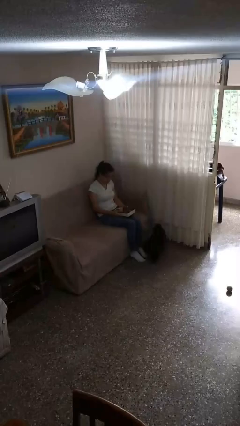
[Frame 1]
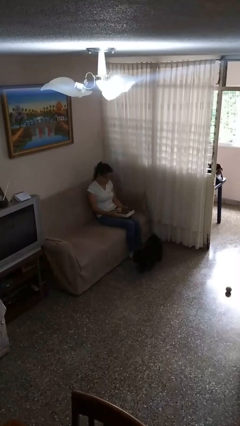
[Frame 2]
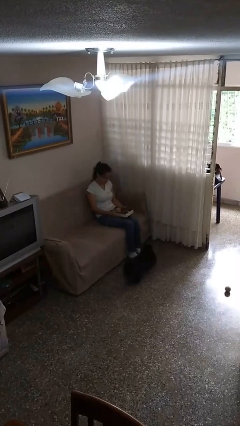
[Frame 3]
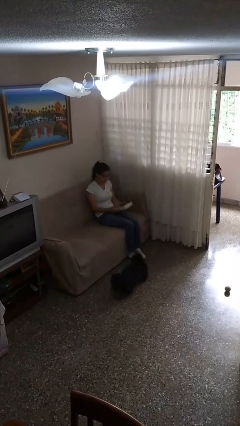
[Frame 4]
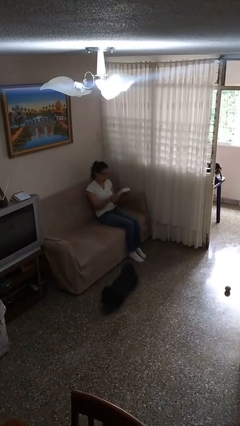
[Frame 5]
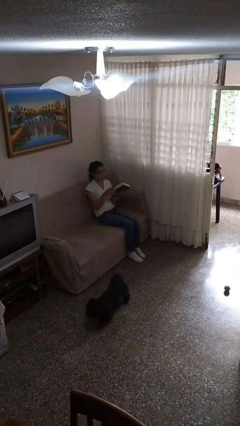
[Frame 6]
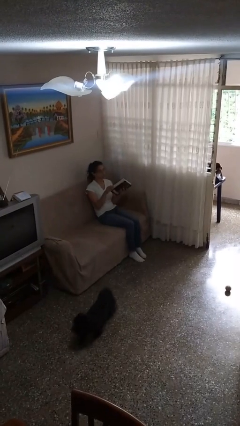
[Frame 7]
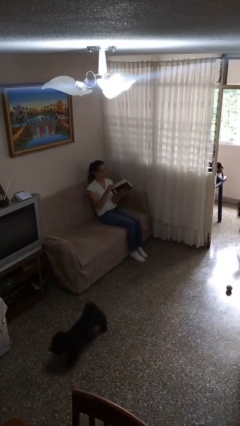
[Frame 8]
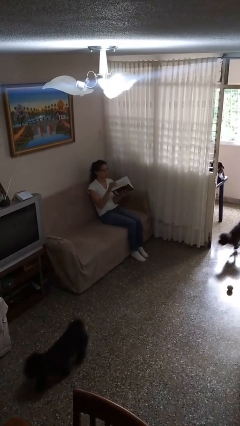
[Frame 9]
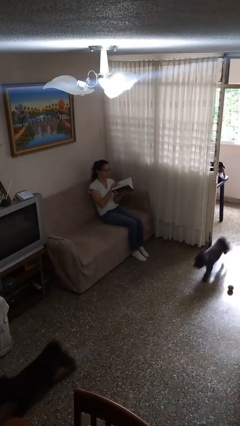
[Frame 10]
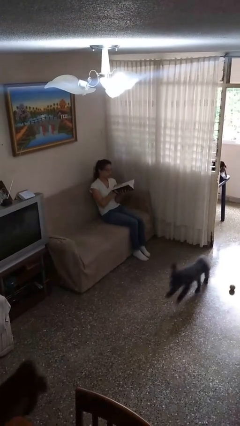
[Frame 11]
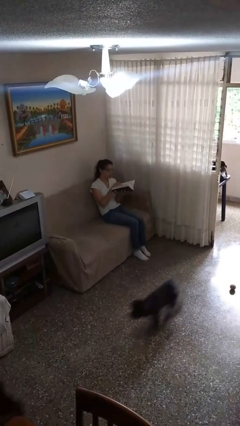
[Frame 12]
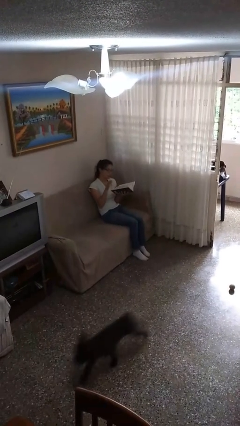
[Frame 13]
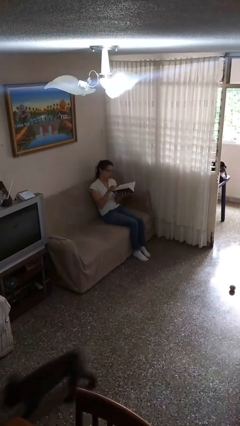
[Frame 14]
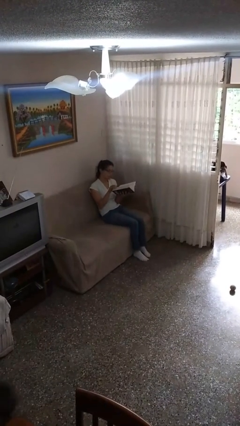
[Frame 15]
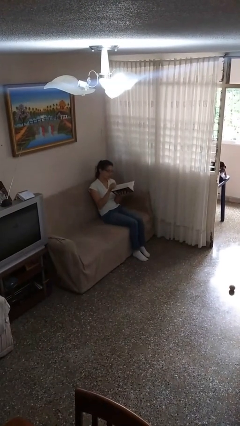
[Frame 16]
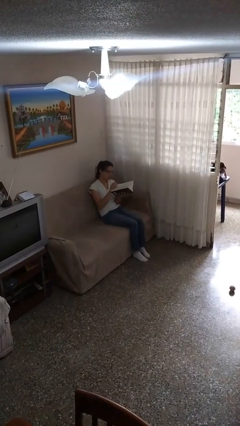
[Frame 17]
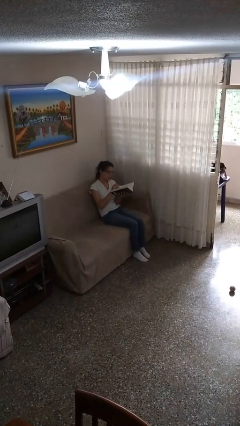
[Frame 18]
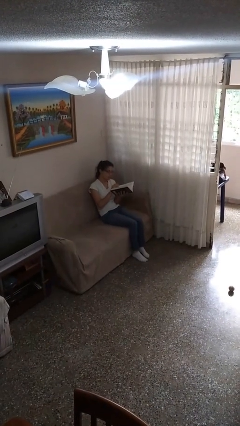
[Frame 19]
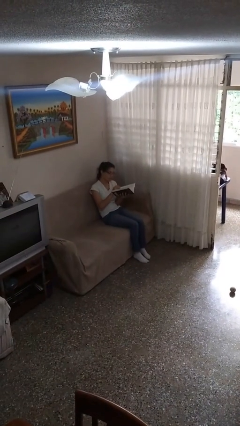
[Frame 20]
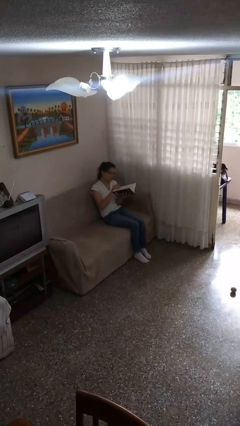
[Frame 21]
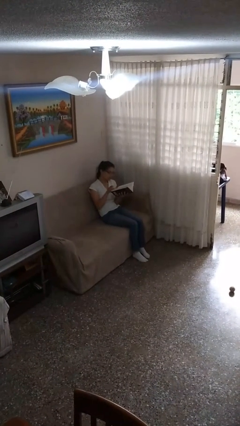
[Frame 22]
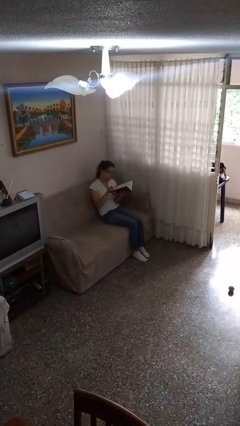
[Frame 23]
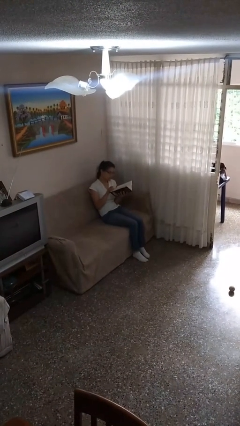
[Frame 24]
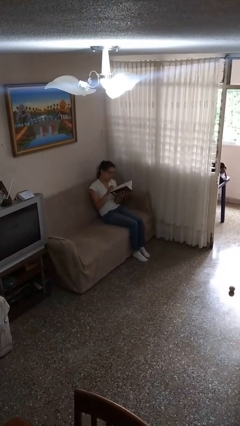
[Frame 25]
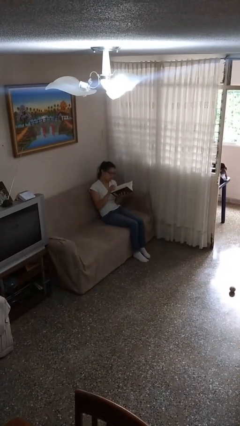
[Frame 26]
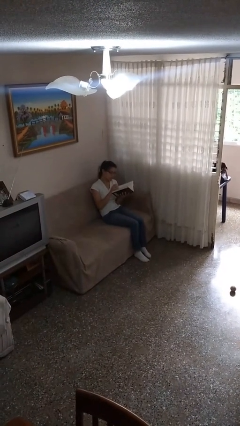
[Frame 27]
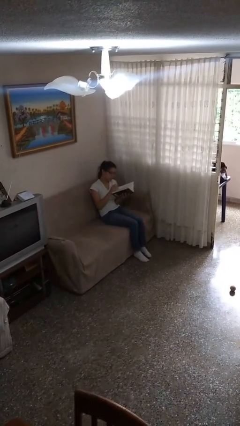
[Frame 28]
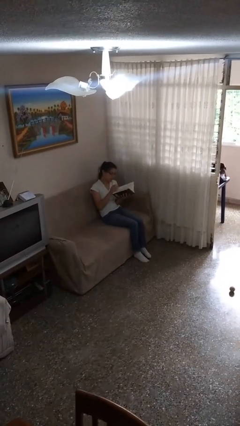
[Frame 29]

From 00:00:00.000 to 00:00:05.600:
person reads book

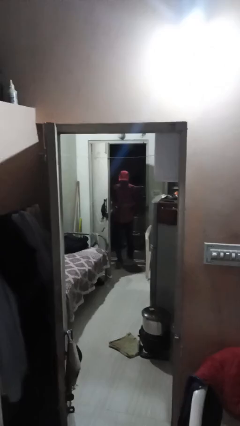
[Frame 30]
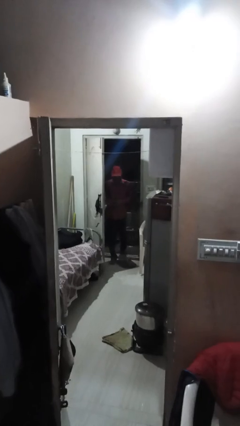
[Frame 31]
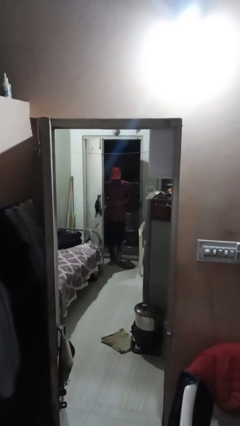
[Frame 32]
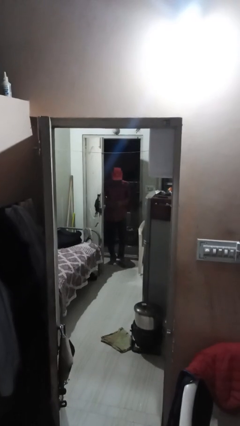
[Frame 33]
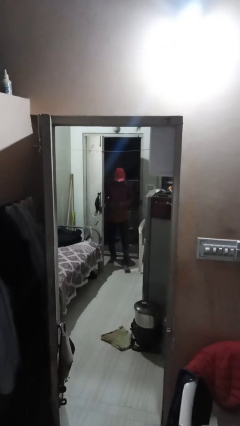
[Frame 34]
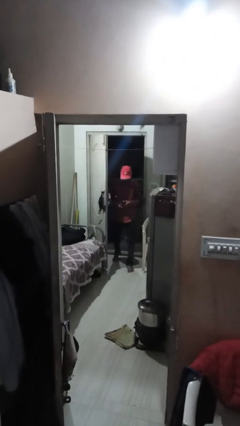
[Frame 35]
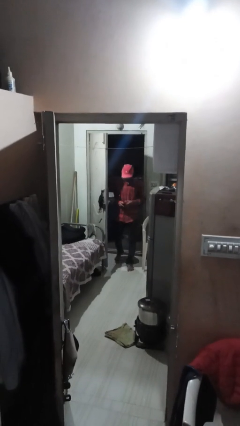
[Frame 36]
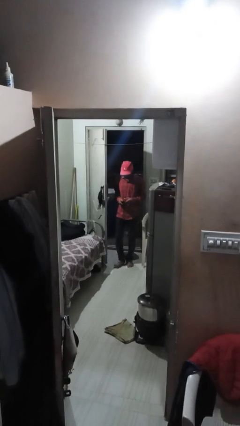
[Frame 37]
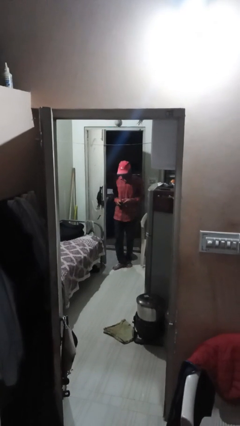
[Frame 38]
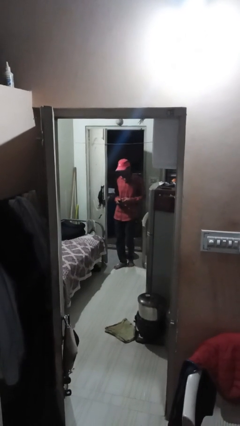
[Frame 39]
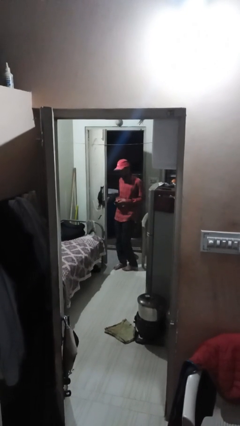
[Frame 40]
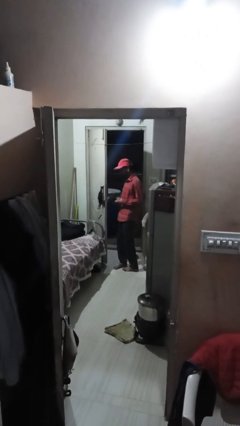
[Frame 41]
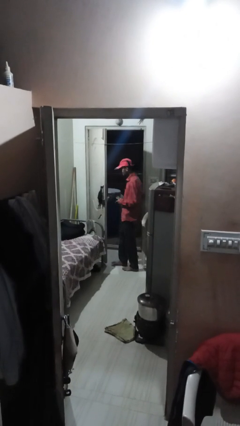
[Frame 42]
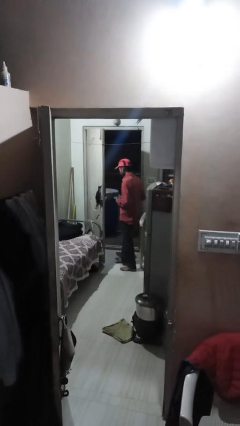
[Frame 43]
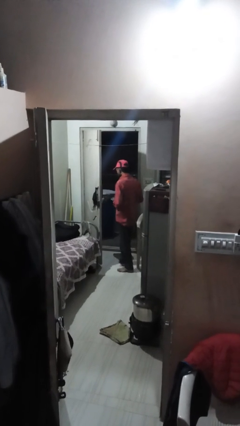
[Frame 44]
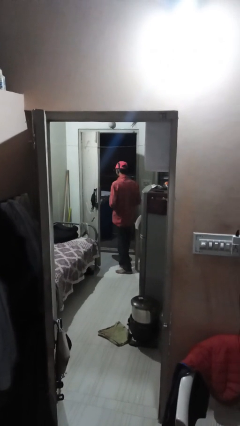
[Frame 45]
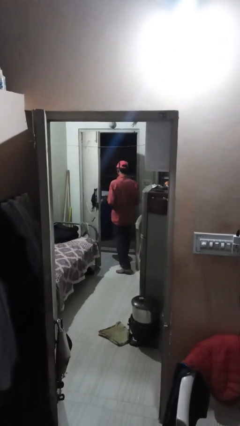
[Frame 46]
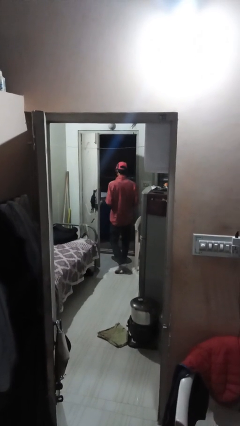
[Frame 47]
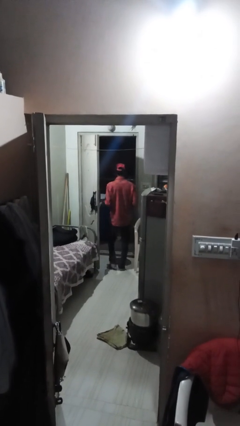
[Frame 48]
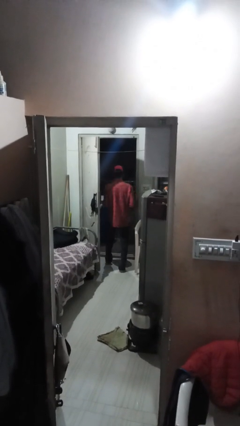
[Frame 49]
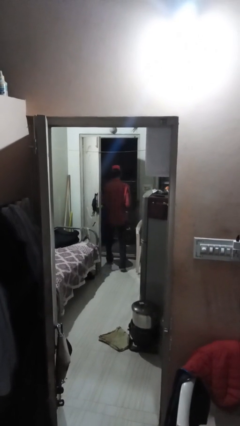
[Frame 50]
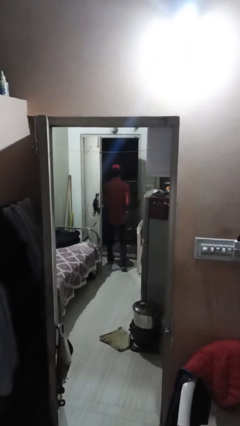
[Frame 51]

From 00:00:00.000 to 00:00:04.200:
person enters scene through structure

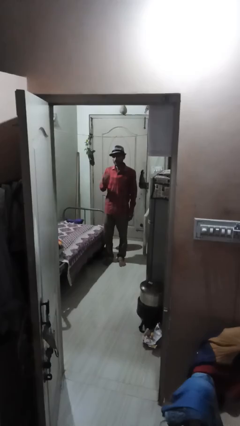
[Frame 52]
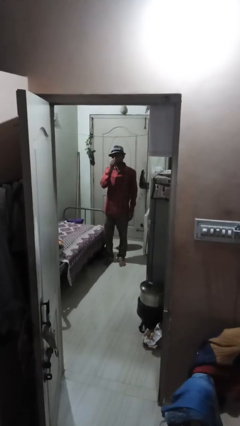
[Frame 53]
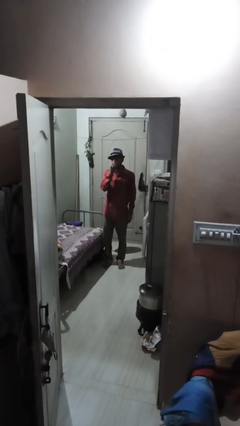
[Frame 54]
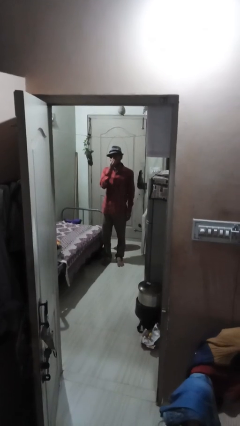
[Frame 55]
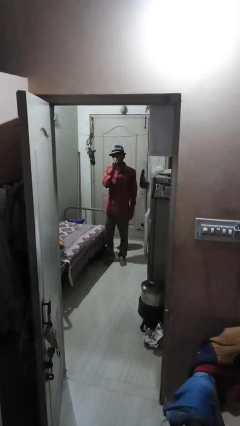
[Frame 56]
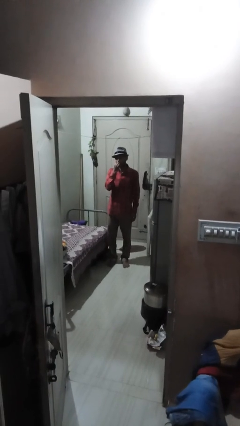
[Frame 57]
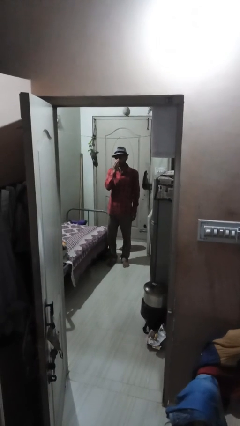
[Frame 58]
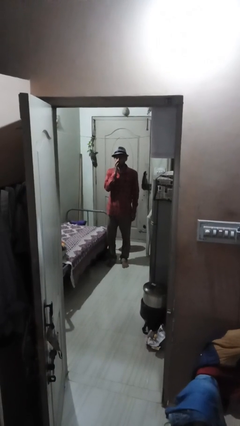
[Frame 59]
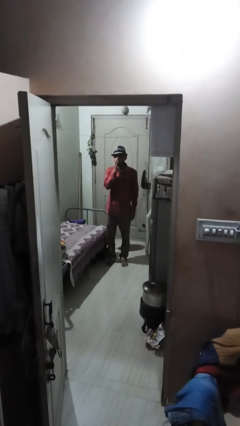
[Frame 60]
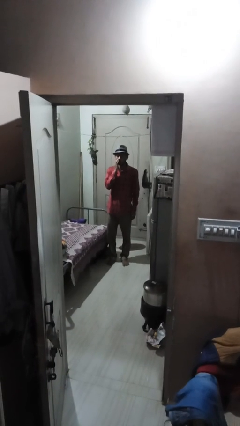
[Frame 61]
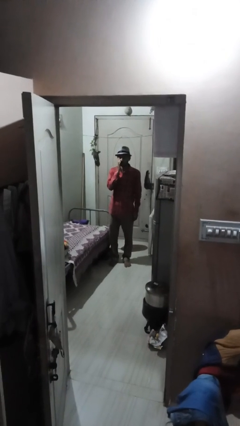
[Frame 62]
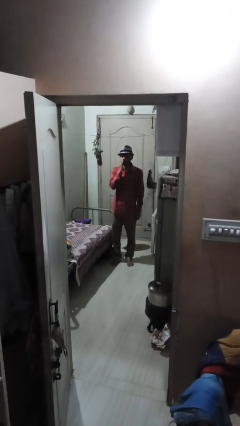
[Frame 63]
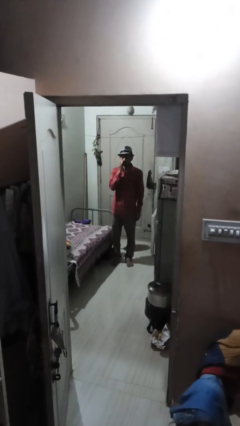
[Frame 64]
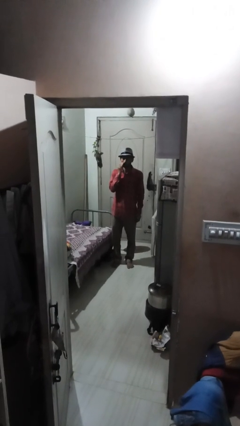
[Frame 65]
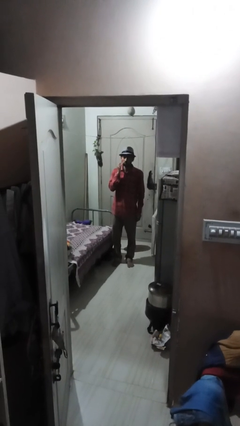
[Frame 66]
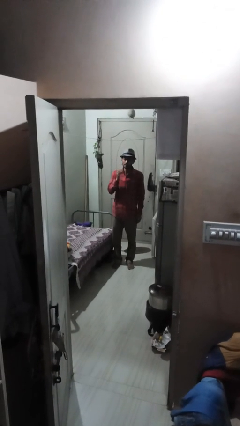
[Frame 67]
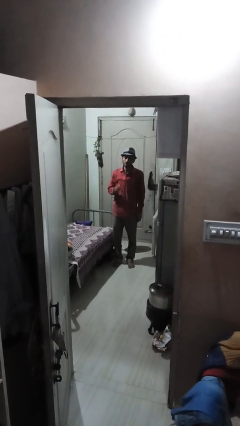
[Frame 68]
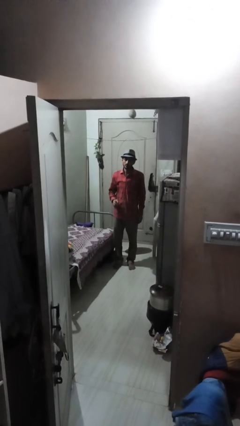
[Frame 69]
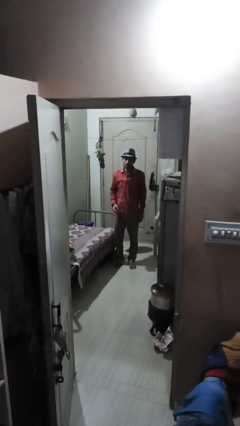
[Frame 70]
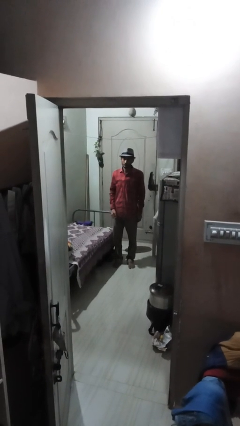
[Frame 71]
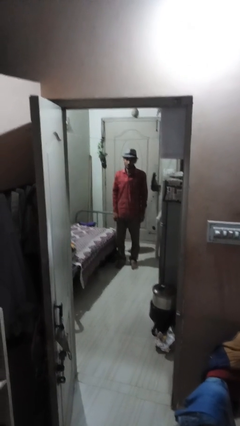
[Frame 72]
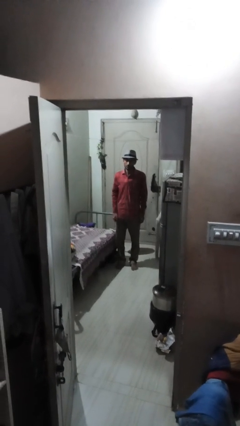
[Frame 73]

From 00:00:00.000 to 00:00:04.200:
person scratches face

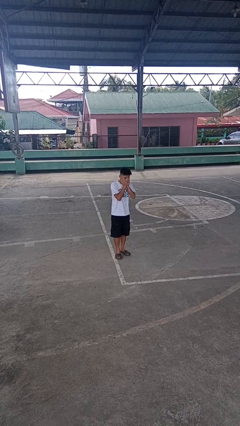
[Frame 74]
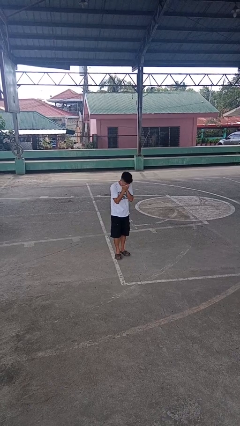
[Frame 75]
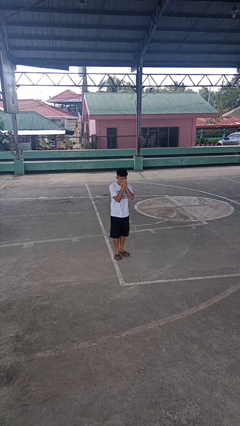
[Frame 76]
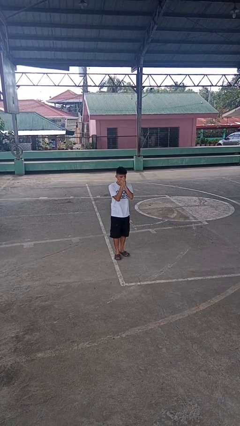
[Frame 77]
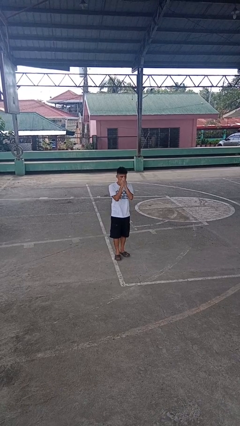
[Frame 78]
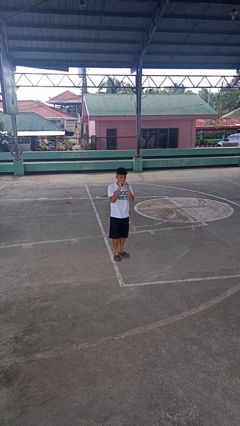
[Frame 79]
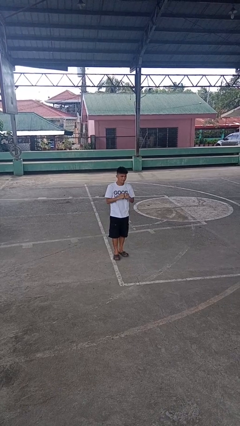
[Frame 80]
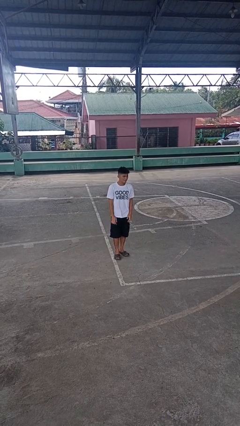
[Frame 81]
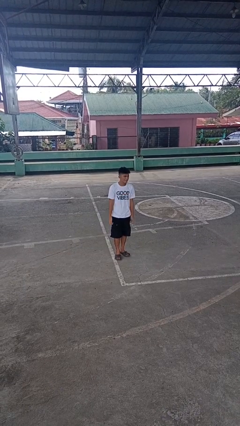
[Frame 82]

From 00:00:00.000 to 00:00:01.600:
person sneezes into hand

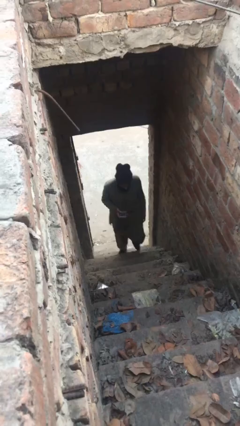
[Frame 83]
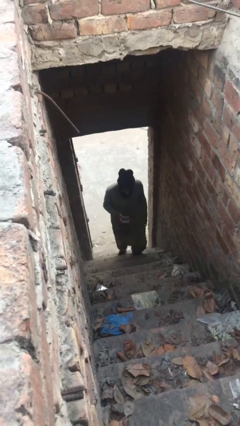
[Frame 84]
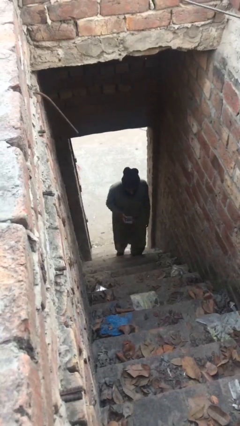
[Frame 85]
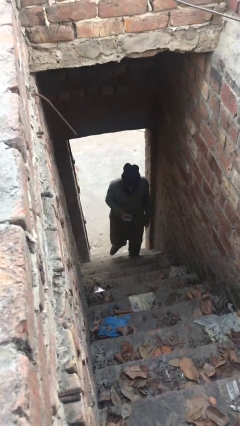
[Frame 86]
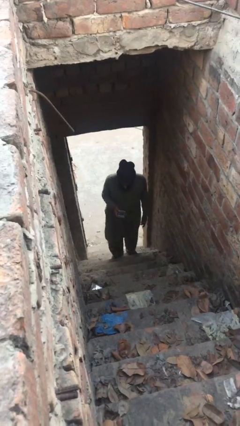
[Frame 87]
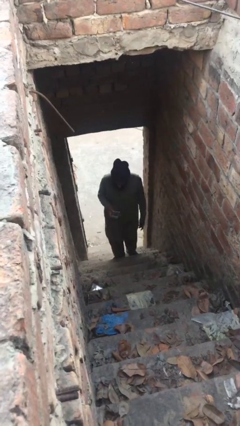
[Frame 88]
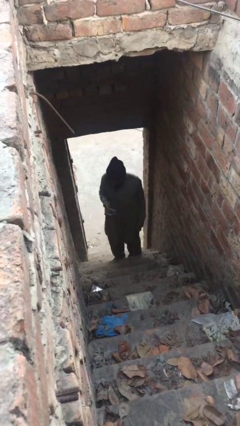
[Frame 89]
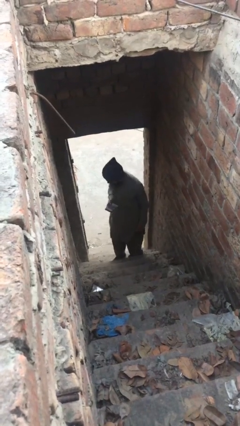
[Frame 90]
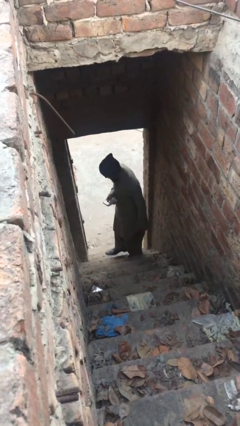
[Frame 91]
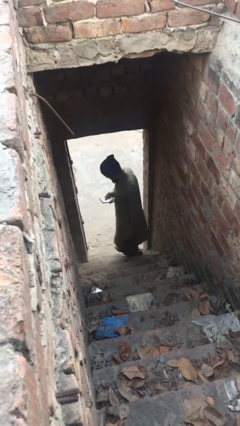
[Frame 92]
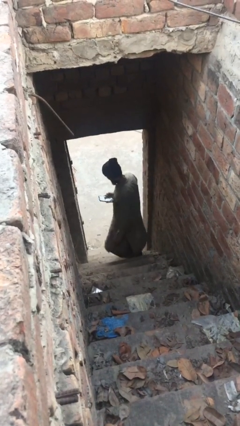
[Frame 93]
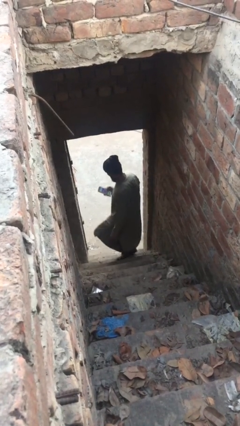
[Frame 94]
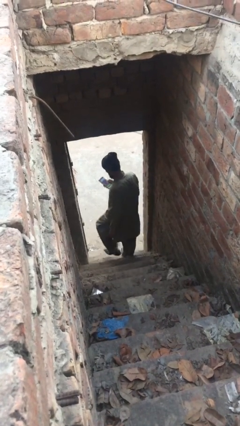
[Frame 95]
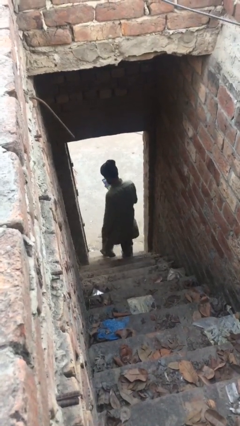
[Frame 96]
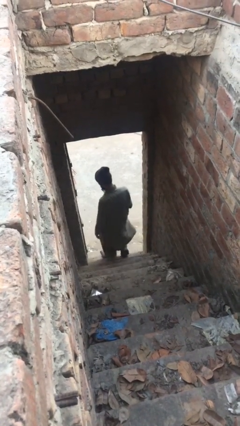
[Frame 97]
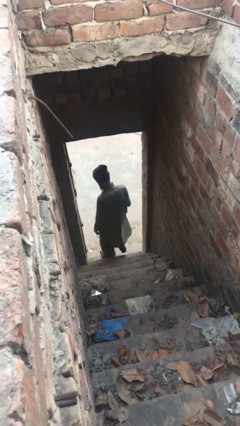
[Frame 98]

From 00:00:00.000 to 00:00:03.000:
person exits scene through structure
